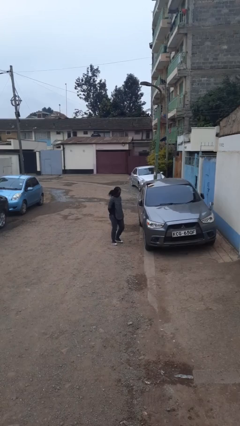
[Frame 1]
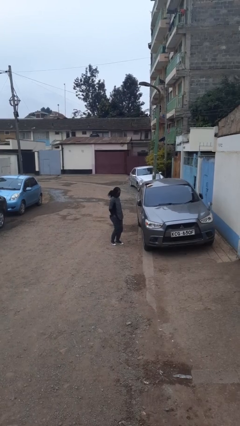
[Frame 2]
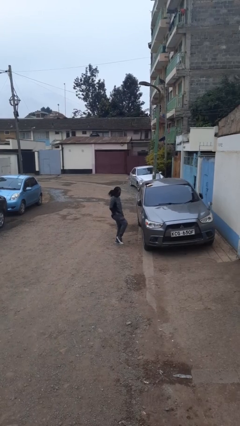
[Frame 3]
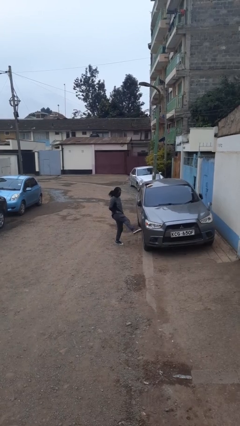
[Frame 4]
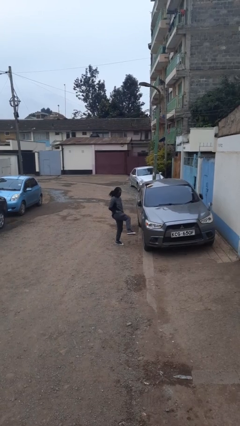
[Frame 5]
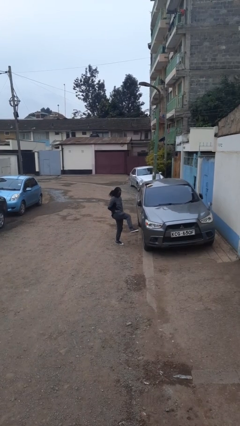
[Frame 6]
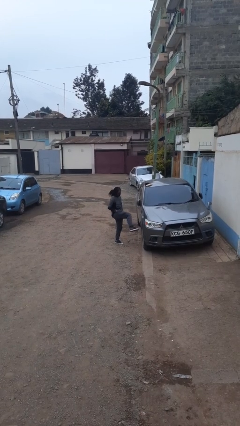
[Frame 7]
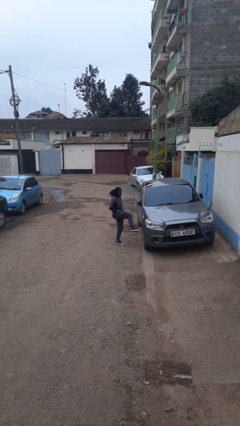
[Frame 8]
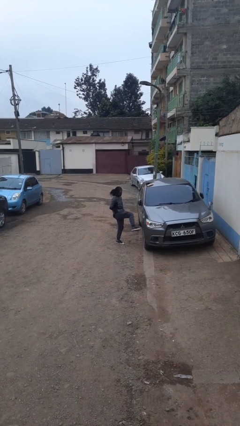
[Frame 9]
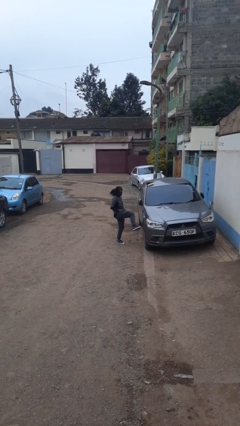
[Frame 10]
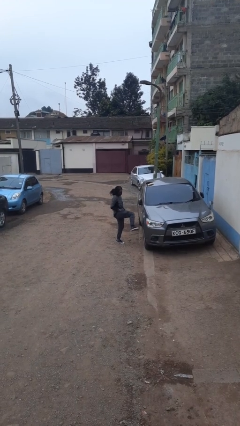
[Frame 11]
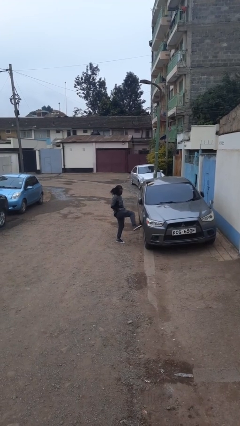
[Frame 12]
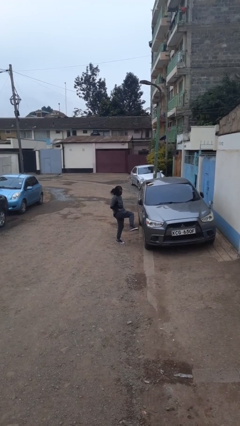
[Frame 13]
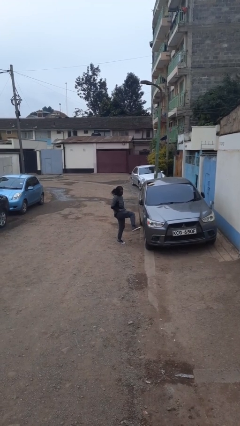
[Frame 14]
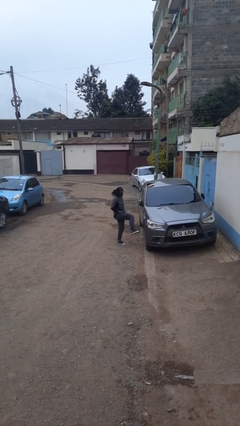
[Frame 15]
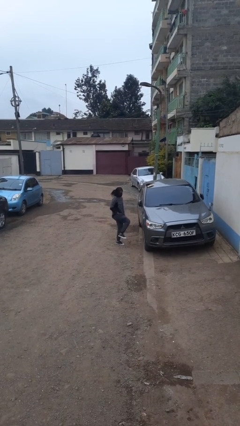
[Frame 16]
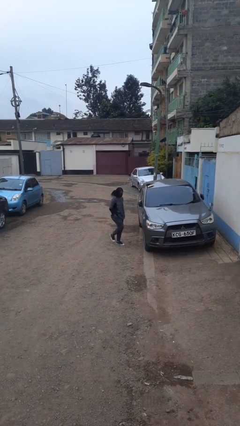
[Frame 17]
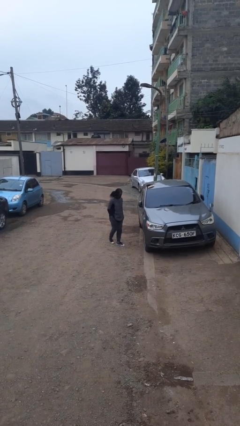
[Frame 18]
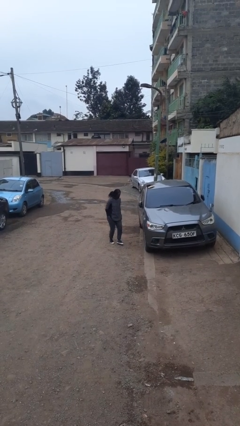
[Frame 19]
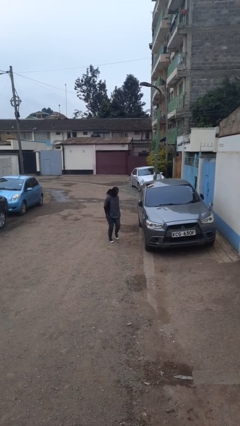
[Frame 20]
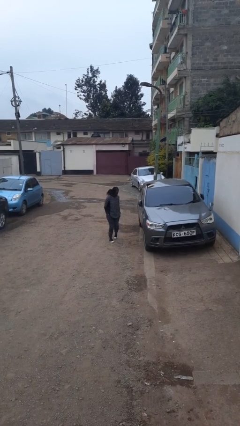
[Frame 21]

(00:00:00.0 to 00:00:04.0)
person kicks car tires

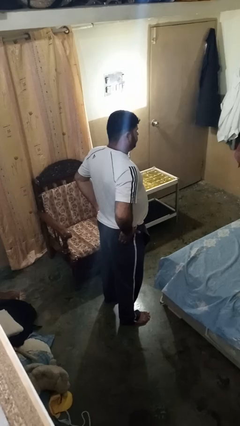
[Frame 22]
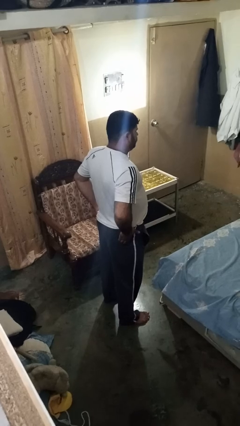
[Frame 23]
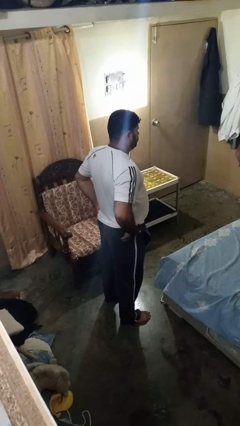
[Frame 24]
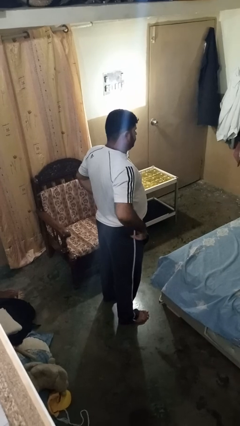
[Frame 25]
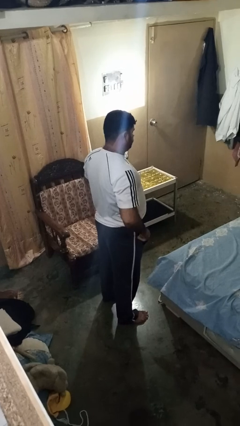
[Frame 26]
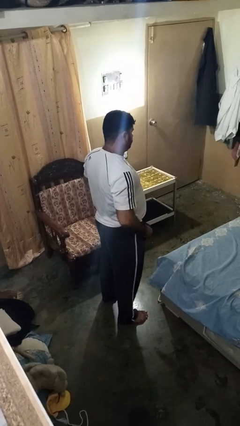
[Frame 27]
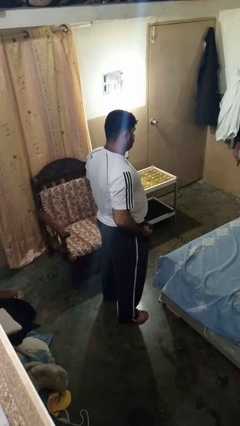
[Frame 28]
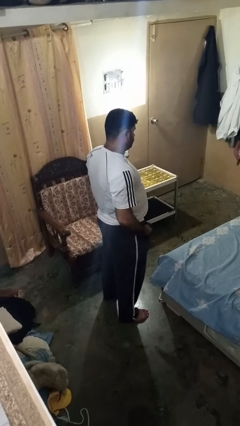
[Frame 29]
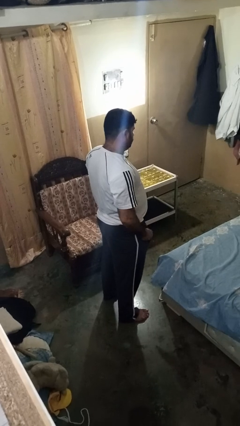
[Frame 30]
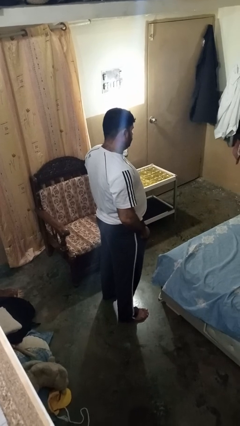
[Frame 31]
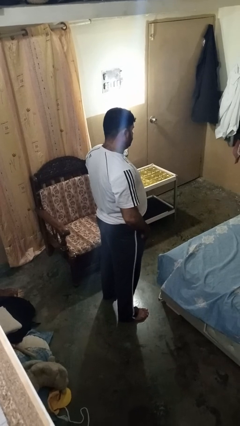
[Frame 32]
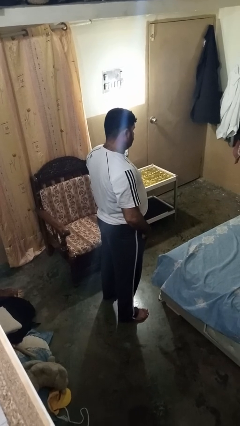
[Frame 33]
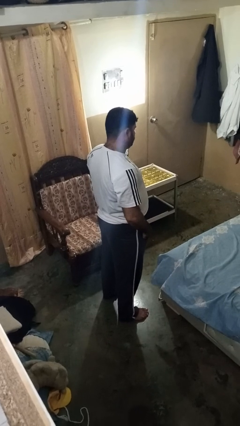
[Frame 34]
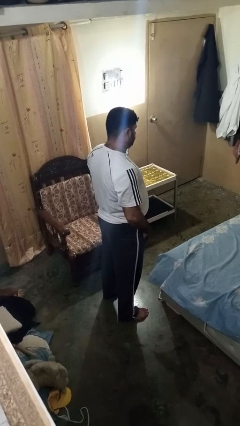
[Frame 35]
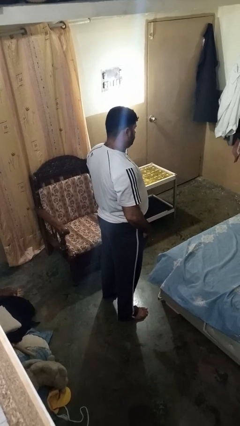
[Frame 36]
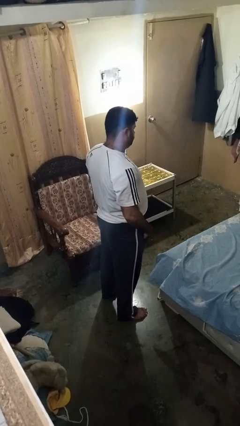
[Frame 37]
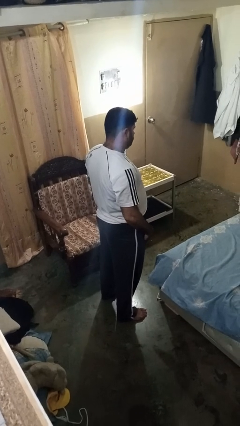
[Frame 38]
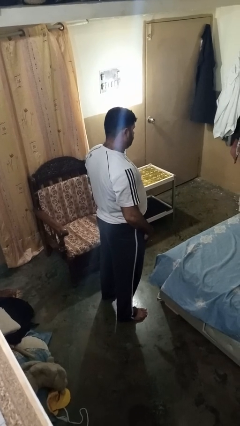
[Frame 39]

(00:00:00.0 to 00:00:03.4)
person puts hands in back pockets

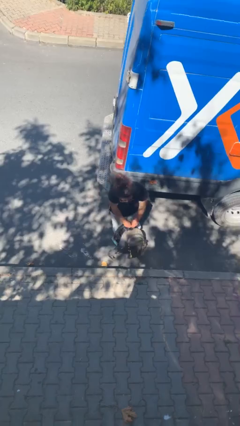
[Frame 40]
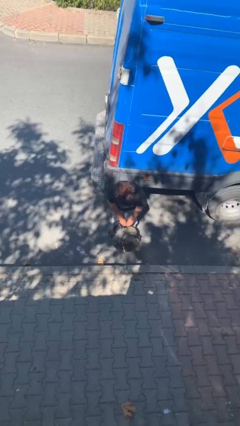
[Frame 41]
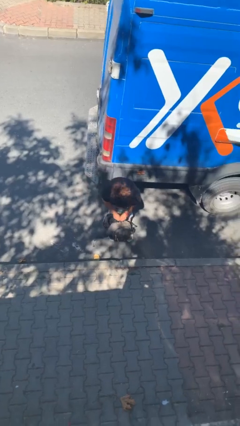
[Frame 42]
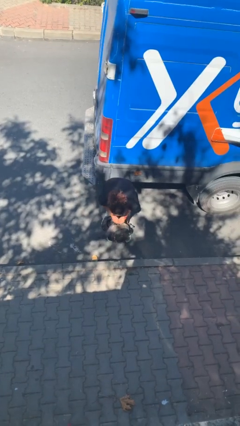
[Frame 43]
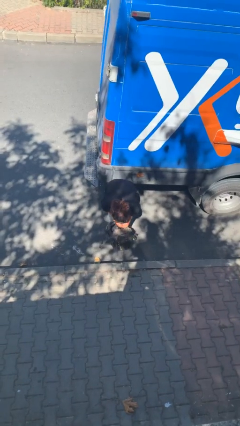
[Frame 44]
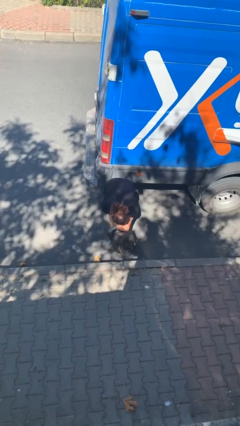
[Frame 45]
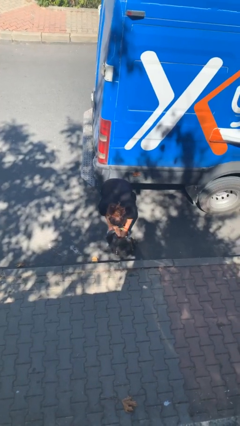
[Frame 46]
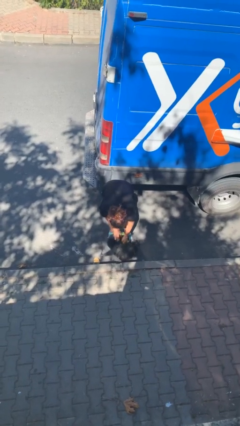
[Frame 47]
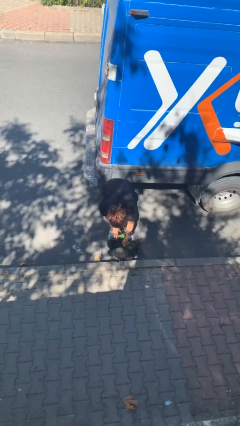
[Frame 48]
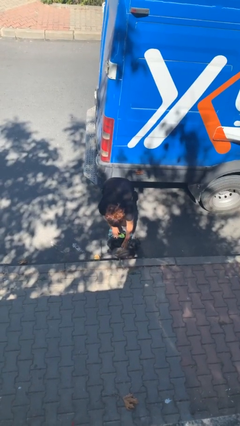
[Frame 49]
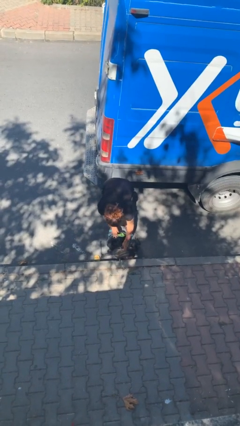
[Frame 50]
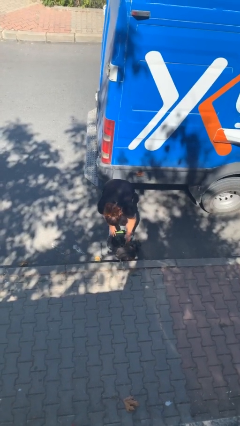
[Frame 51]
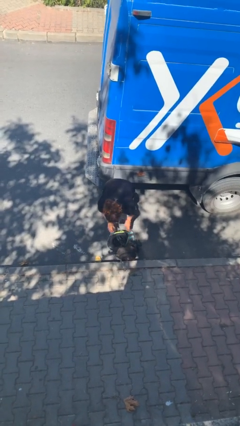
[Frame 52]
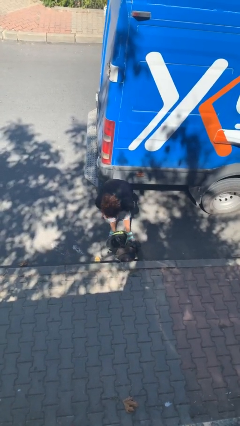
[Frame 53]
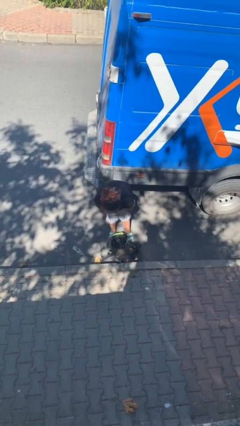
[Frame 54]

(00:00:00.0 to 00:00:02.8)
person puts down object on floor

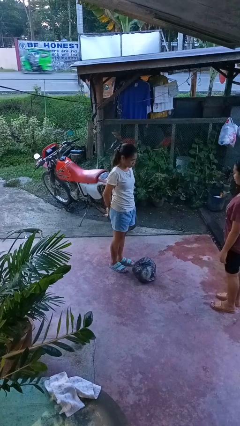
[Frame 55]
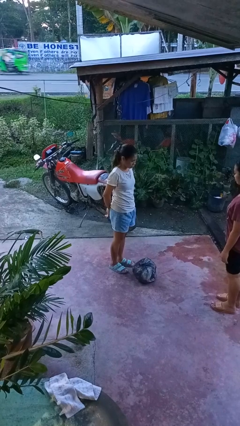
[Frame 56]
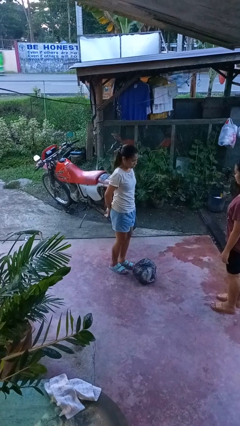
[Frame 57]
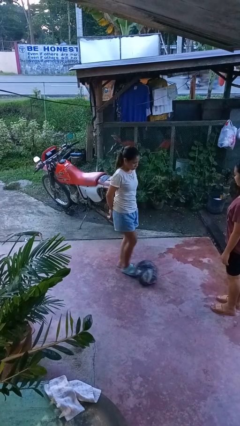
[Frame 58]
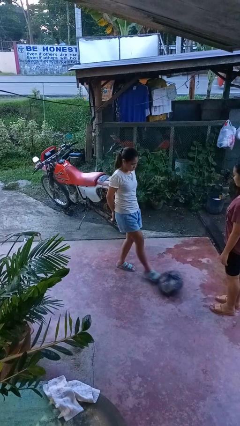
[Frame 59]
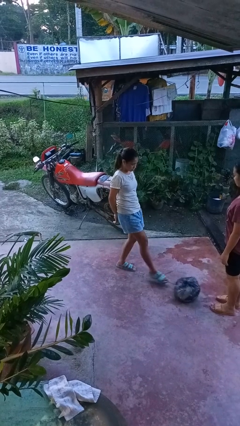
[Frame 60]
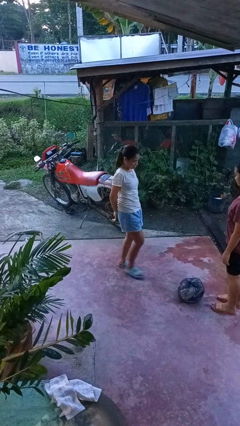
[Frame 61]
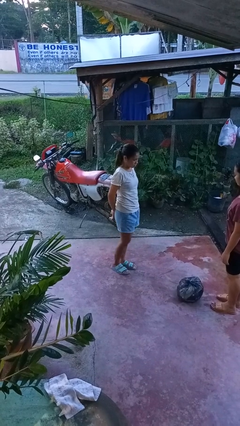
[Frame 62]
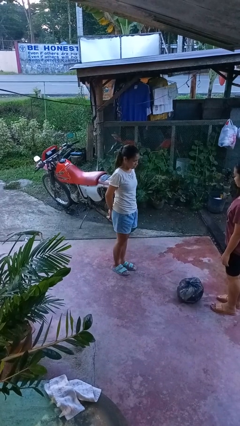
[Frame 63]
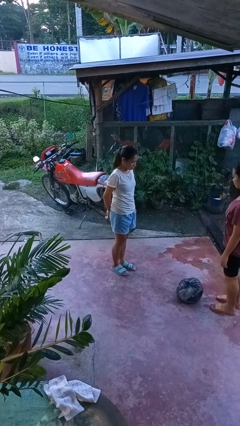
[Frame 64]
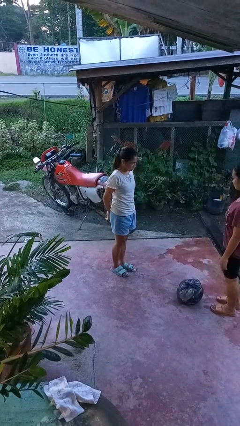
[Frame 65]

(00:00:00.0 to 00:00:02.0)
person kicks object to person

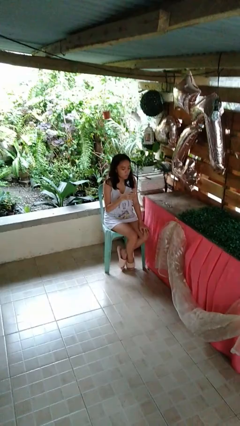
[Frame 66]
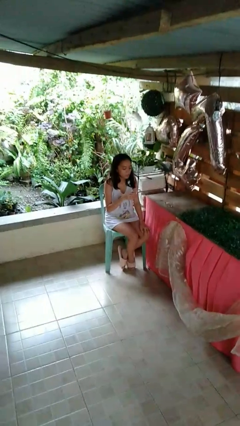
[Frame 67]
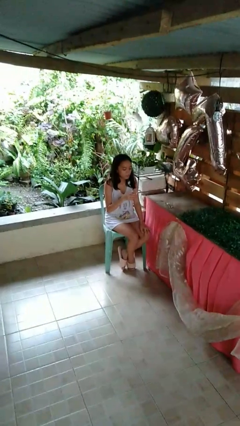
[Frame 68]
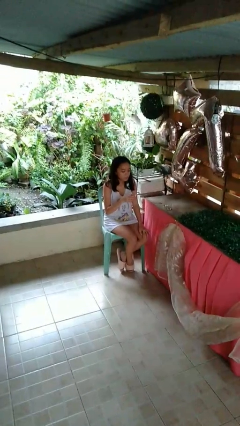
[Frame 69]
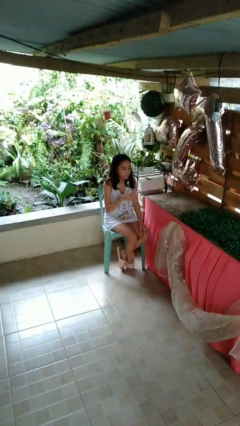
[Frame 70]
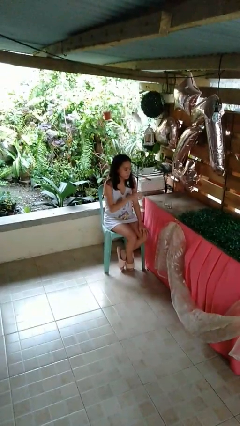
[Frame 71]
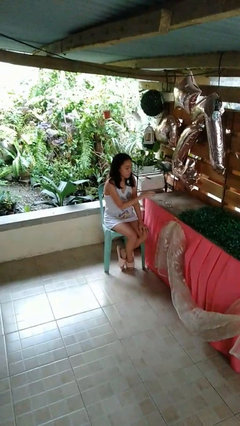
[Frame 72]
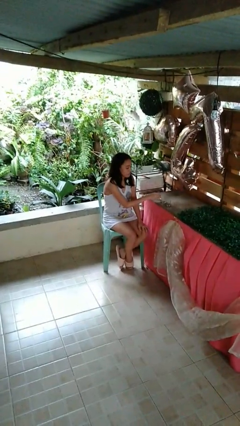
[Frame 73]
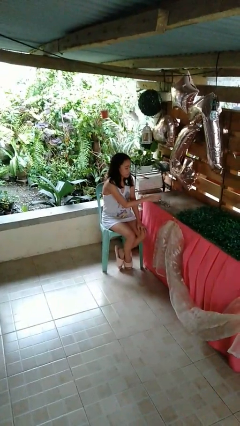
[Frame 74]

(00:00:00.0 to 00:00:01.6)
person puts down object on table

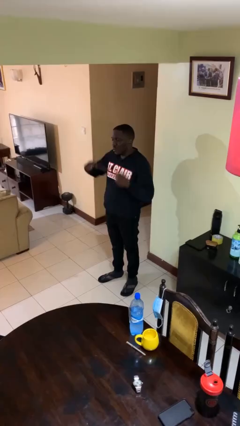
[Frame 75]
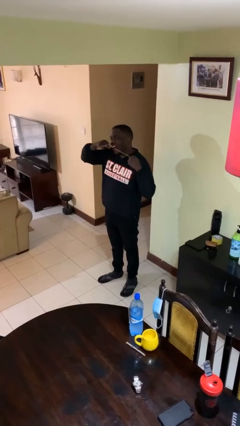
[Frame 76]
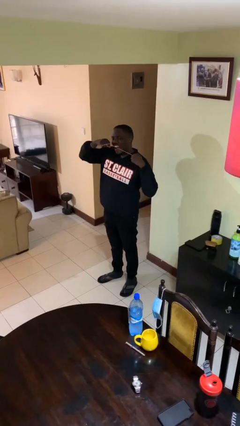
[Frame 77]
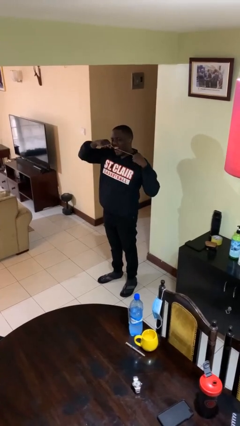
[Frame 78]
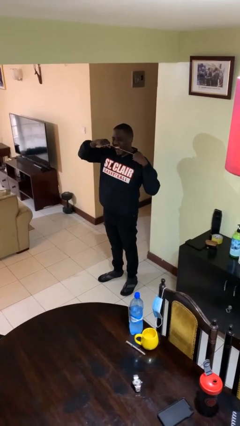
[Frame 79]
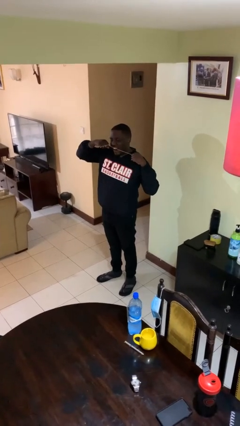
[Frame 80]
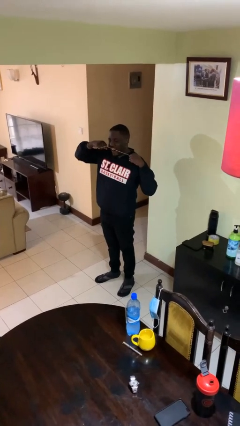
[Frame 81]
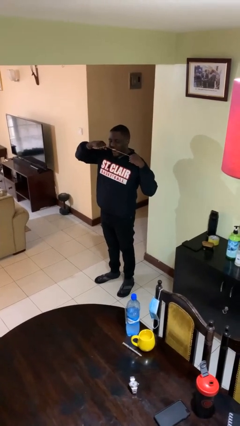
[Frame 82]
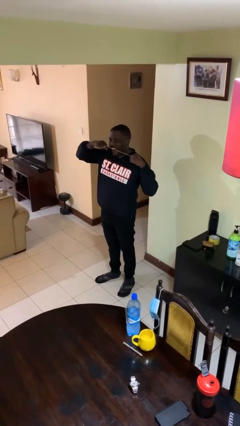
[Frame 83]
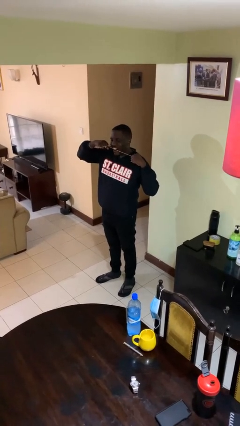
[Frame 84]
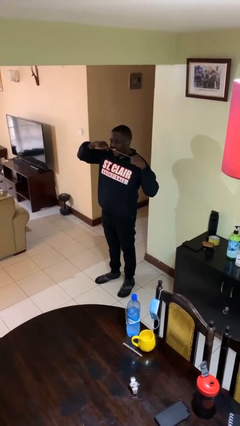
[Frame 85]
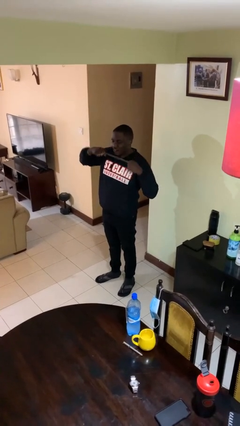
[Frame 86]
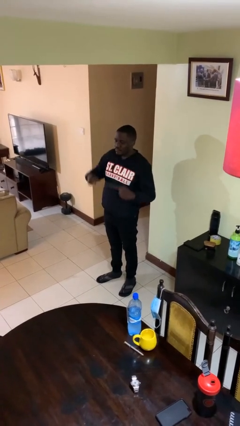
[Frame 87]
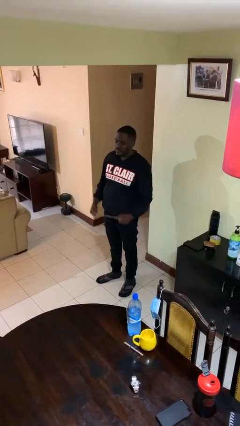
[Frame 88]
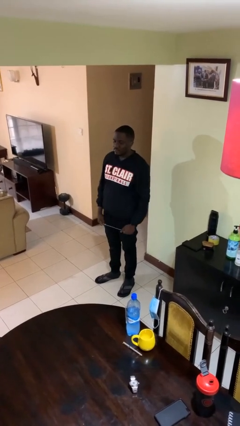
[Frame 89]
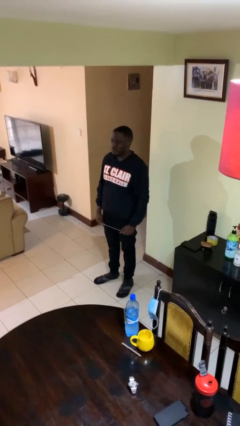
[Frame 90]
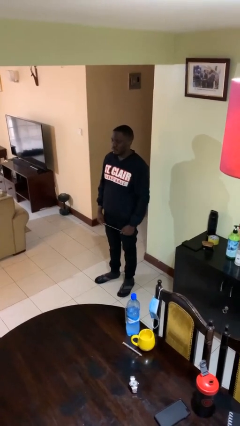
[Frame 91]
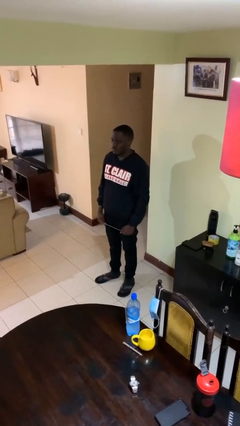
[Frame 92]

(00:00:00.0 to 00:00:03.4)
person flosses

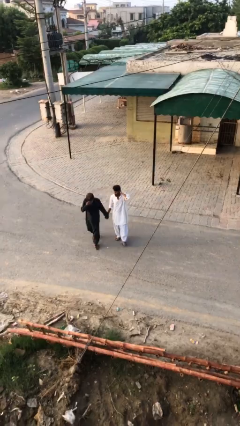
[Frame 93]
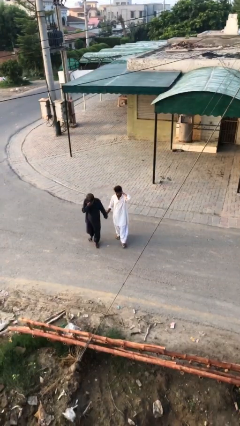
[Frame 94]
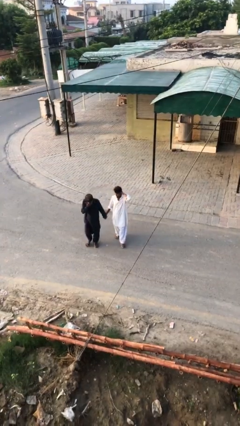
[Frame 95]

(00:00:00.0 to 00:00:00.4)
person holds hand
